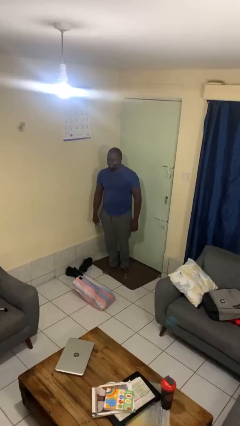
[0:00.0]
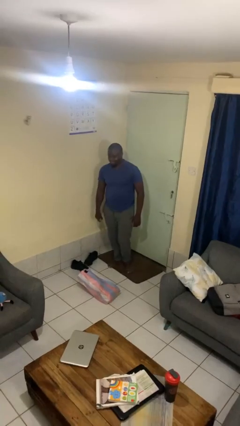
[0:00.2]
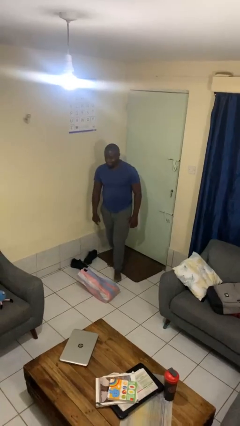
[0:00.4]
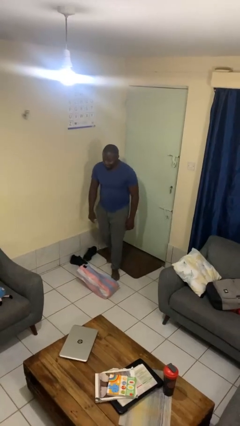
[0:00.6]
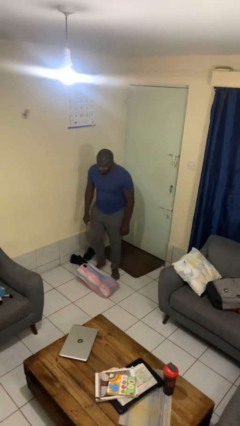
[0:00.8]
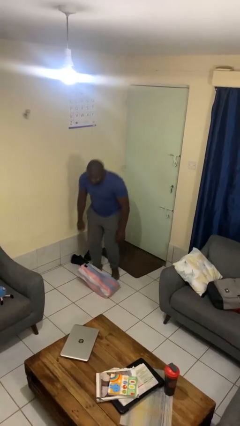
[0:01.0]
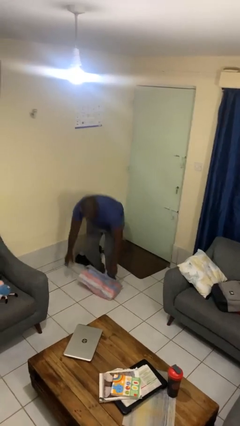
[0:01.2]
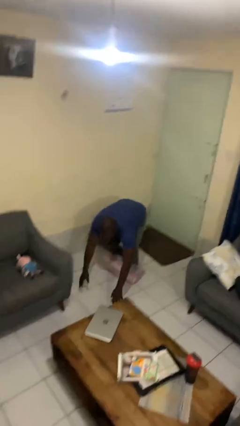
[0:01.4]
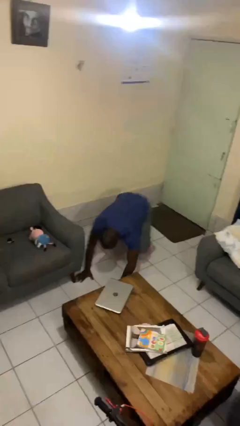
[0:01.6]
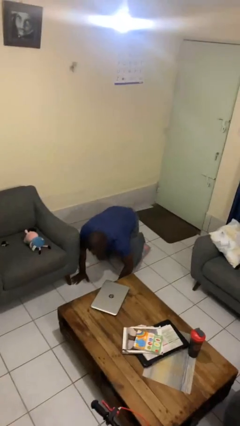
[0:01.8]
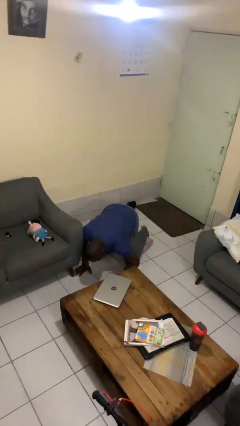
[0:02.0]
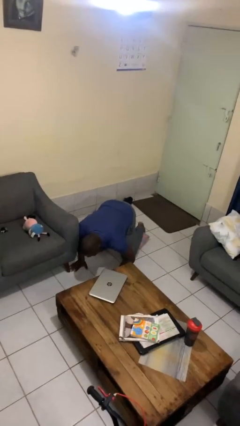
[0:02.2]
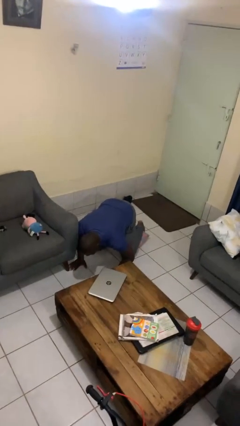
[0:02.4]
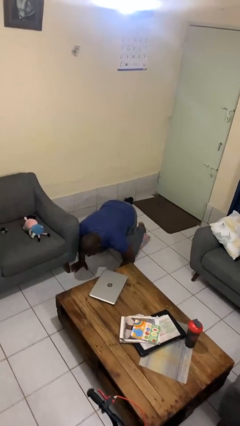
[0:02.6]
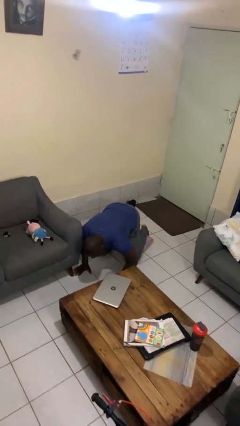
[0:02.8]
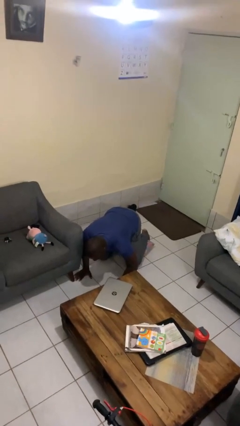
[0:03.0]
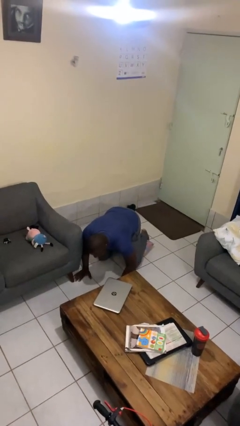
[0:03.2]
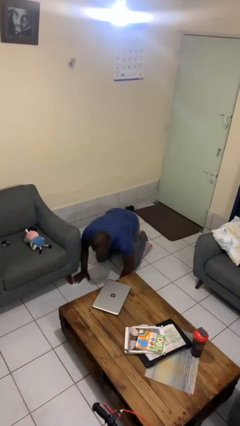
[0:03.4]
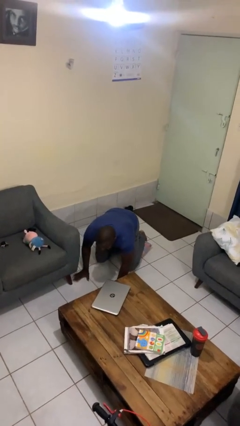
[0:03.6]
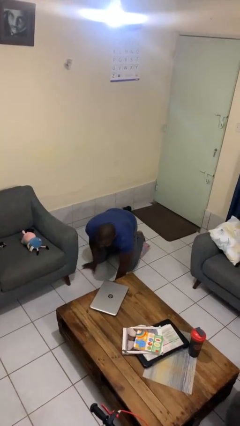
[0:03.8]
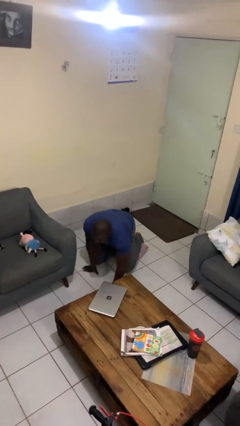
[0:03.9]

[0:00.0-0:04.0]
person trips on object on floor

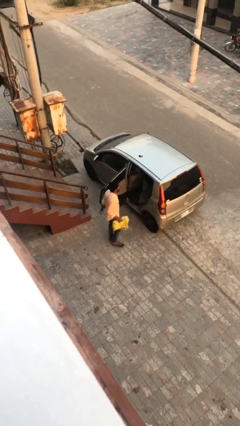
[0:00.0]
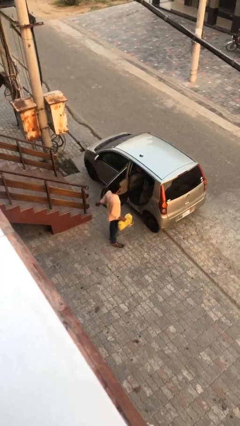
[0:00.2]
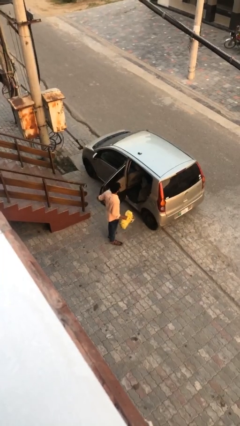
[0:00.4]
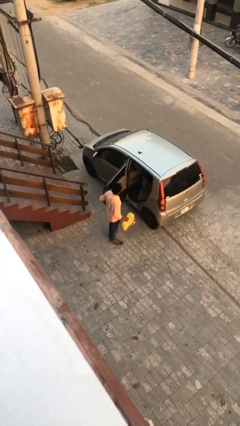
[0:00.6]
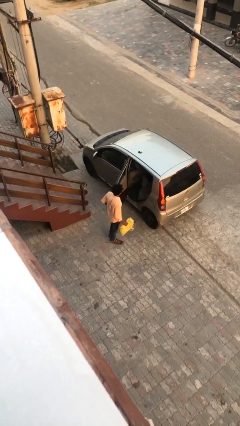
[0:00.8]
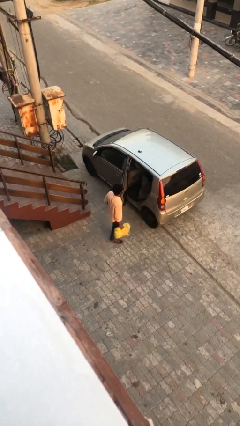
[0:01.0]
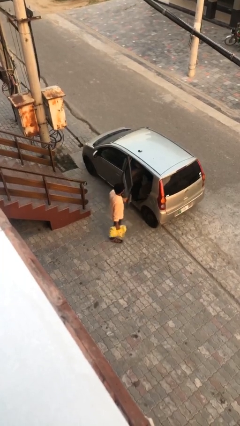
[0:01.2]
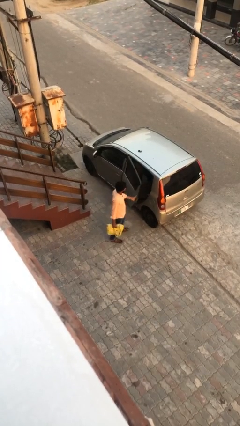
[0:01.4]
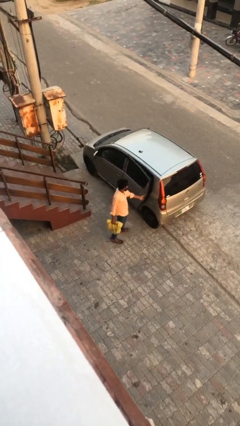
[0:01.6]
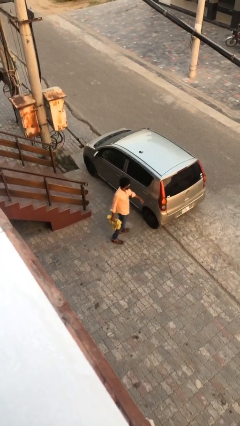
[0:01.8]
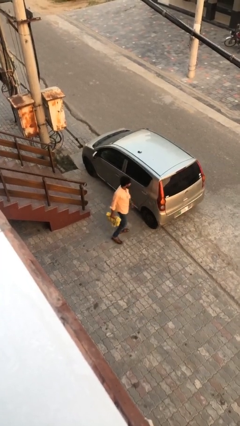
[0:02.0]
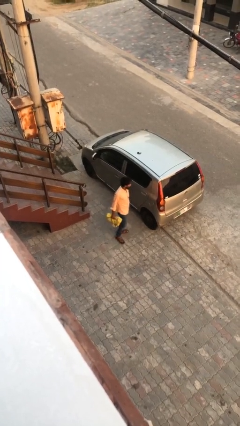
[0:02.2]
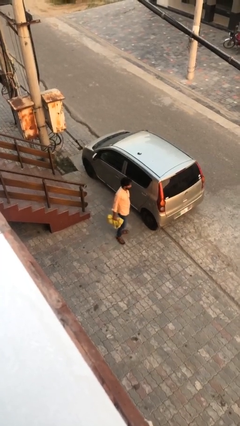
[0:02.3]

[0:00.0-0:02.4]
person closes car door

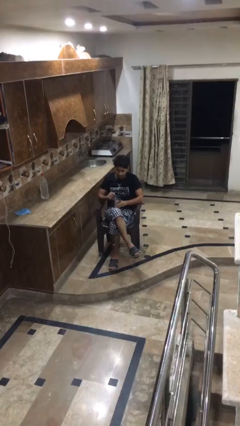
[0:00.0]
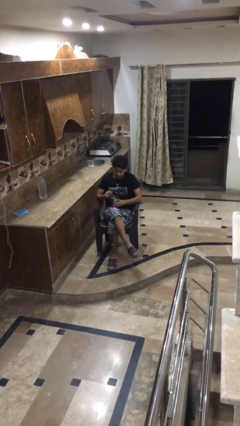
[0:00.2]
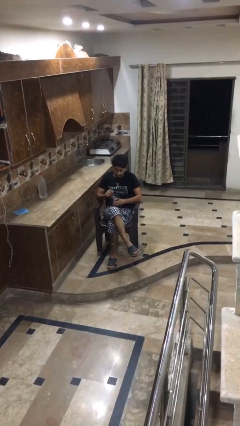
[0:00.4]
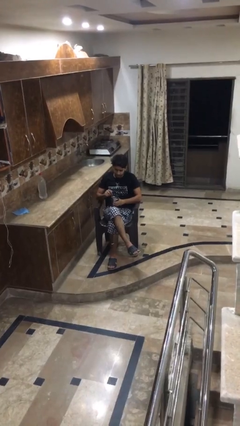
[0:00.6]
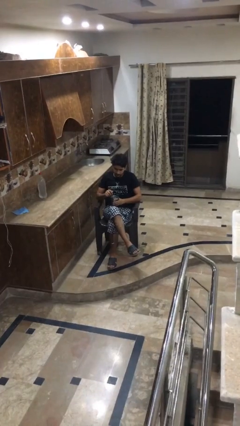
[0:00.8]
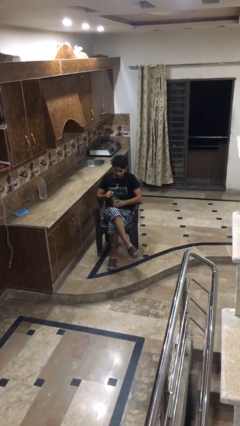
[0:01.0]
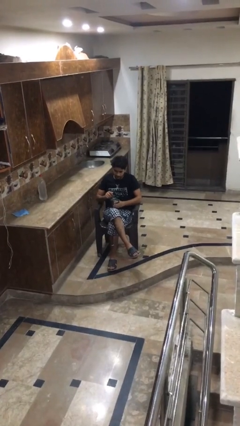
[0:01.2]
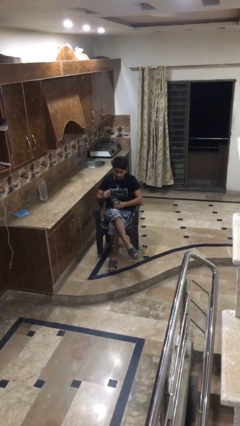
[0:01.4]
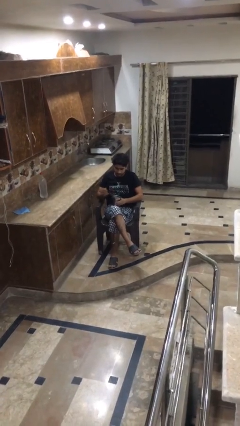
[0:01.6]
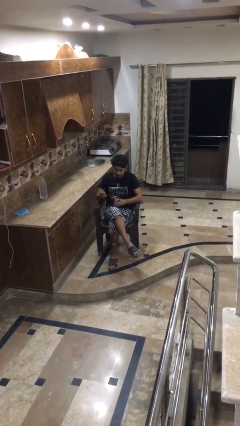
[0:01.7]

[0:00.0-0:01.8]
person stirs mug

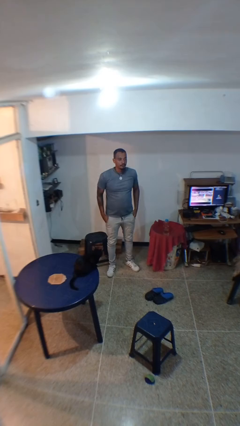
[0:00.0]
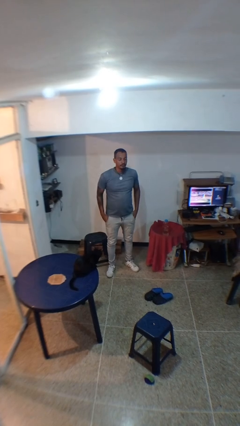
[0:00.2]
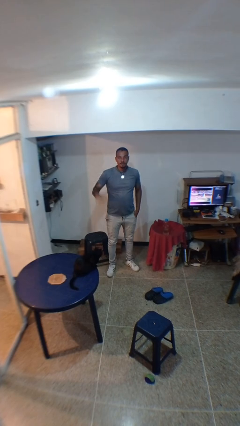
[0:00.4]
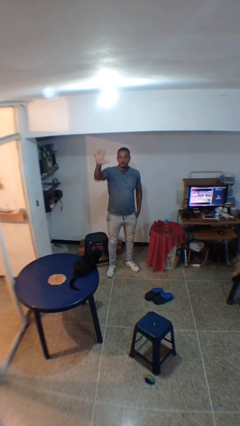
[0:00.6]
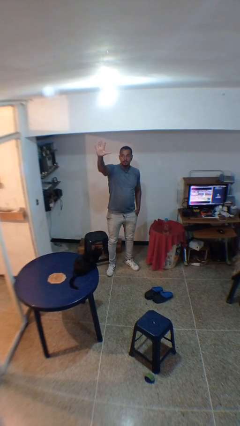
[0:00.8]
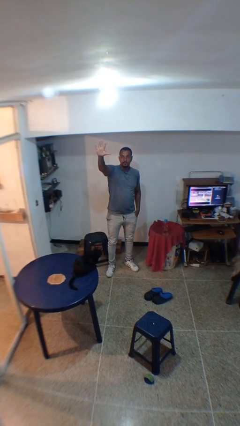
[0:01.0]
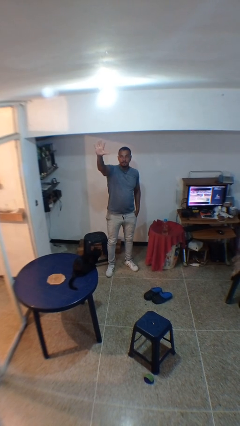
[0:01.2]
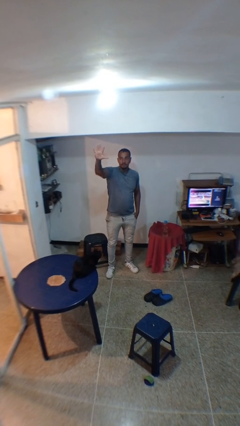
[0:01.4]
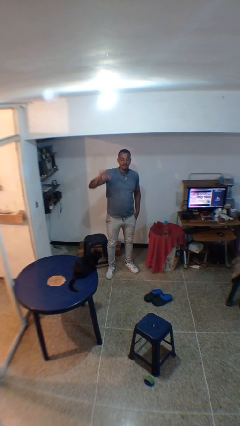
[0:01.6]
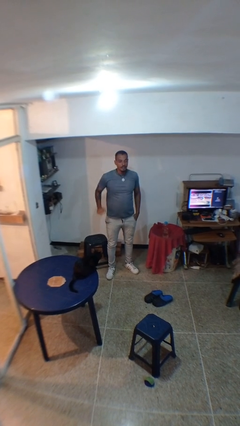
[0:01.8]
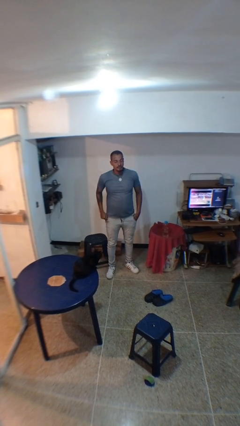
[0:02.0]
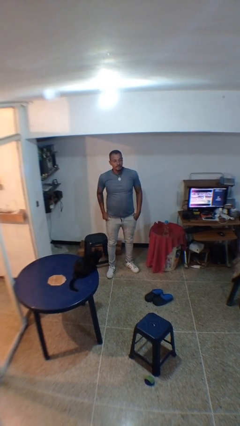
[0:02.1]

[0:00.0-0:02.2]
person gestures number five

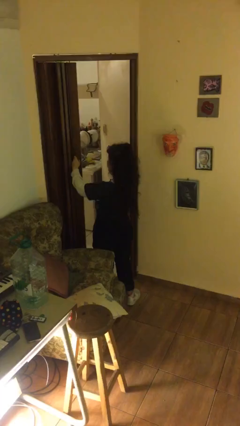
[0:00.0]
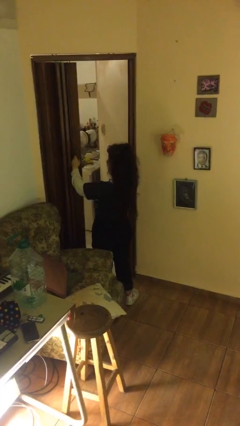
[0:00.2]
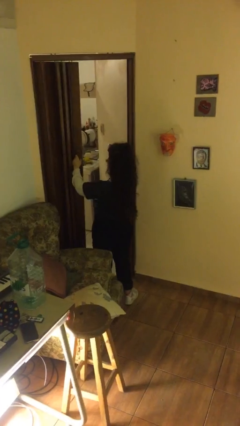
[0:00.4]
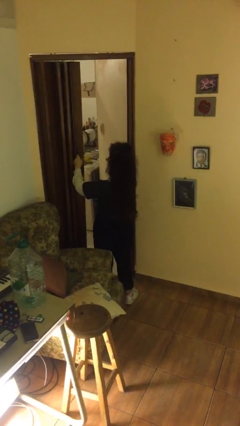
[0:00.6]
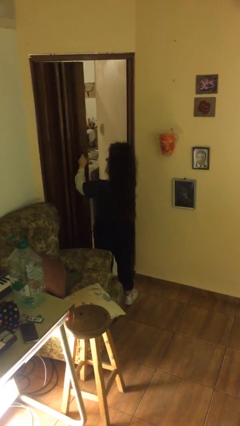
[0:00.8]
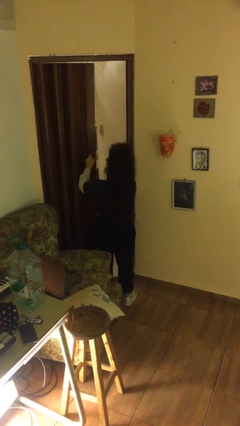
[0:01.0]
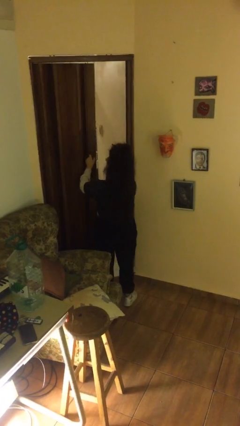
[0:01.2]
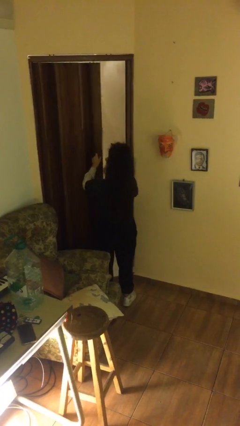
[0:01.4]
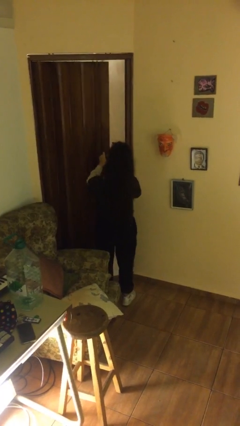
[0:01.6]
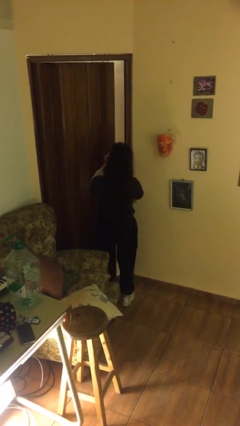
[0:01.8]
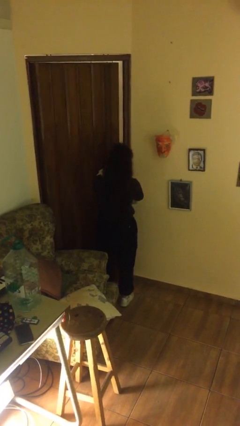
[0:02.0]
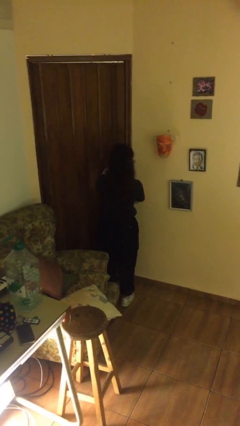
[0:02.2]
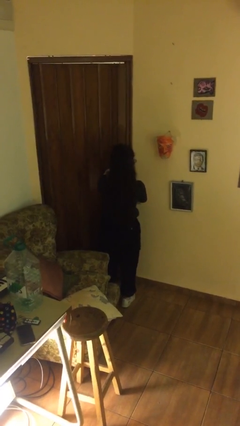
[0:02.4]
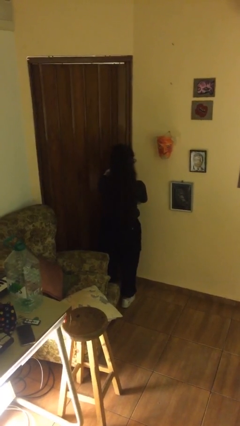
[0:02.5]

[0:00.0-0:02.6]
person closes sliding door

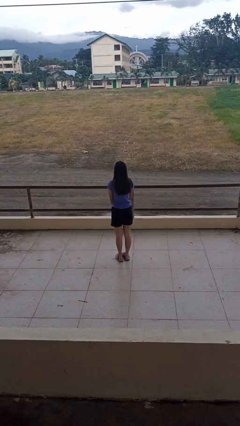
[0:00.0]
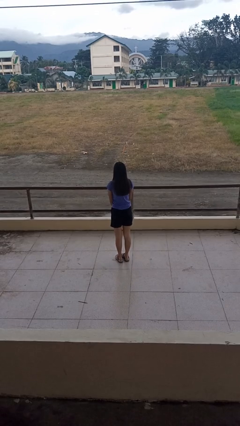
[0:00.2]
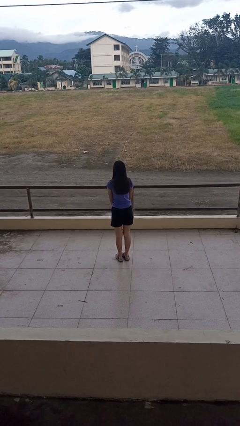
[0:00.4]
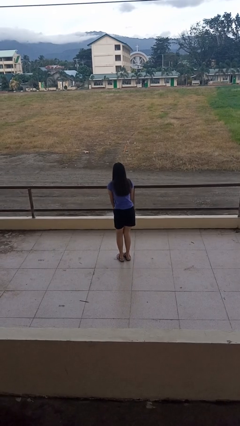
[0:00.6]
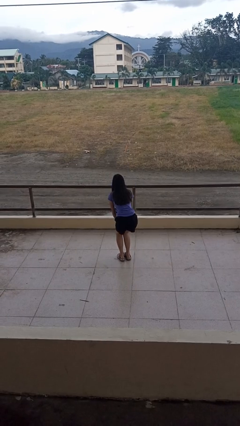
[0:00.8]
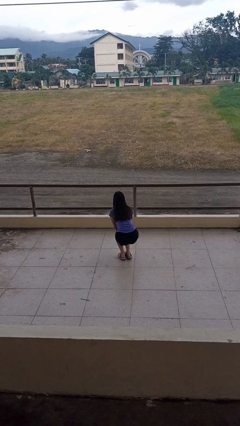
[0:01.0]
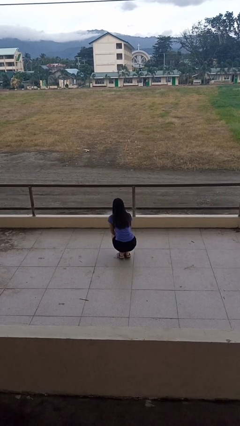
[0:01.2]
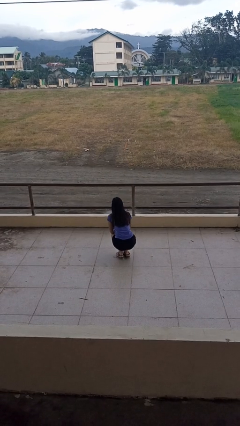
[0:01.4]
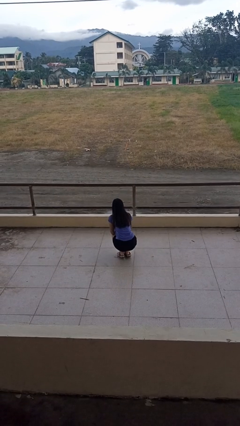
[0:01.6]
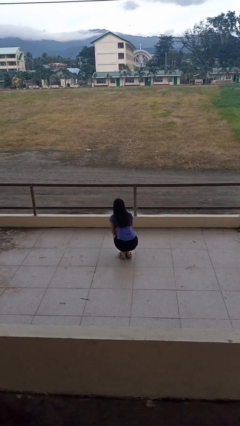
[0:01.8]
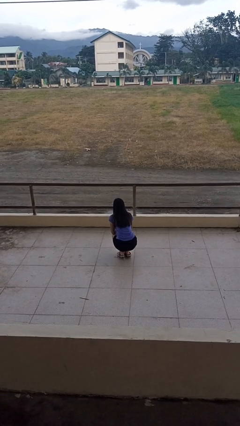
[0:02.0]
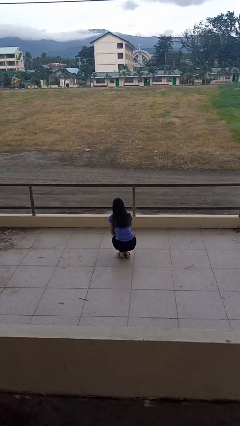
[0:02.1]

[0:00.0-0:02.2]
person squats

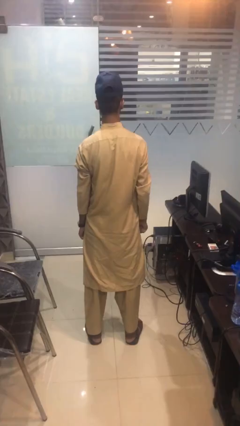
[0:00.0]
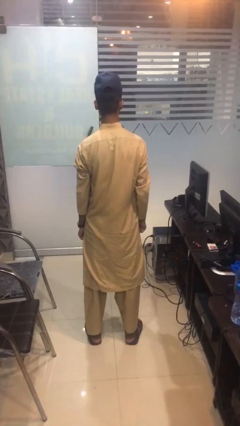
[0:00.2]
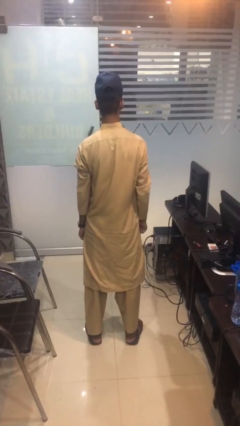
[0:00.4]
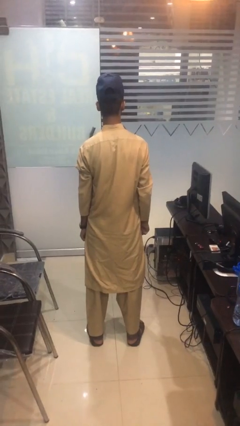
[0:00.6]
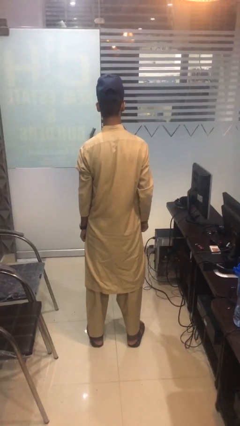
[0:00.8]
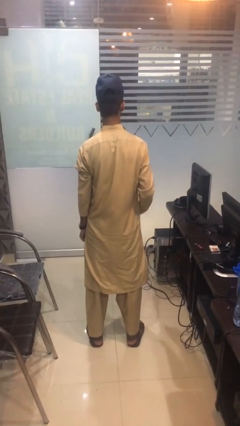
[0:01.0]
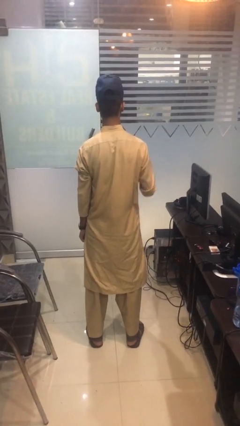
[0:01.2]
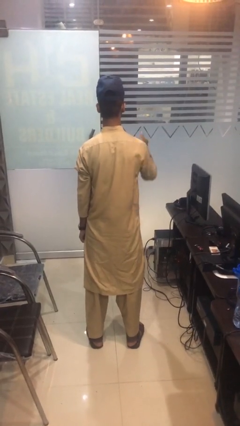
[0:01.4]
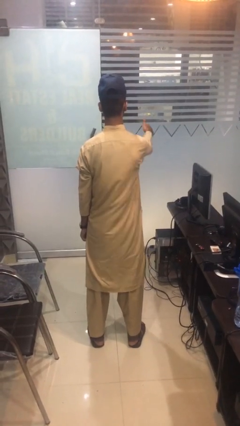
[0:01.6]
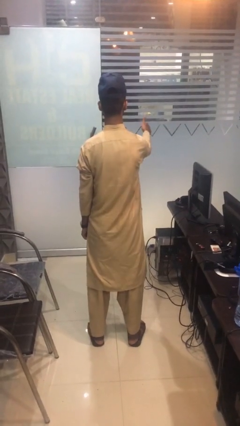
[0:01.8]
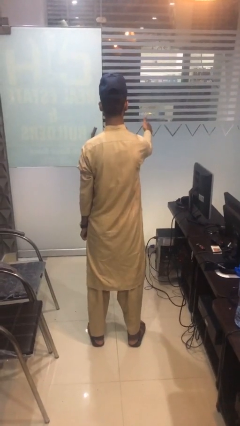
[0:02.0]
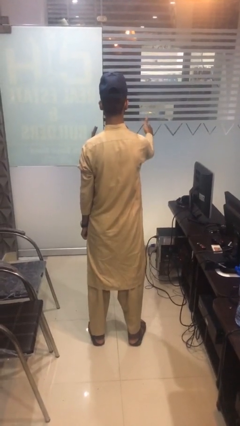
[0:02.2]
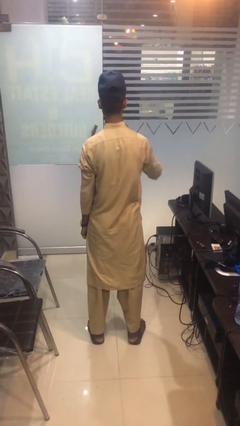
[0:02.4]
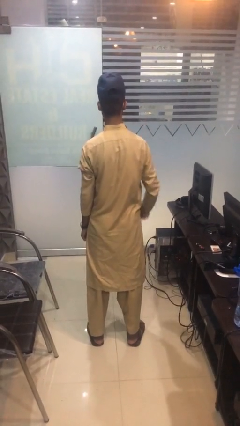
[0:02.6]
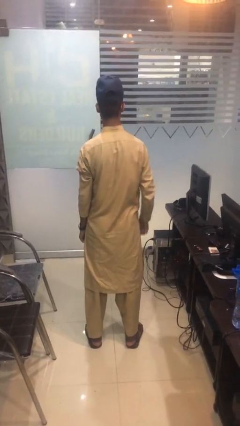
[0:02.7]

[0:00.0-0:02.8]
person gestures thumbs up
